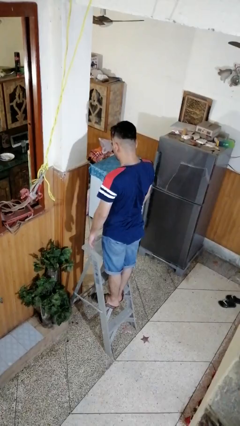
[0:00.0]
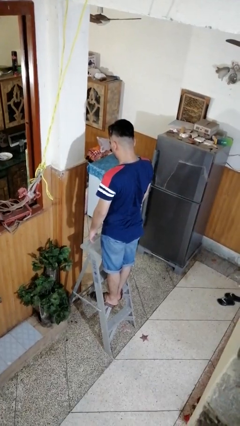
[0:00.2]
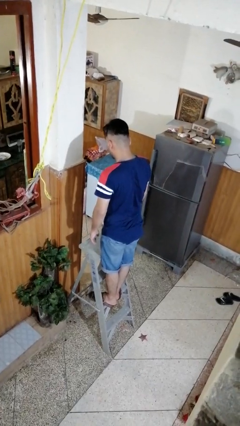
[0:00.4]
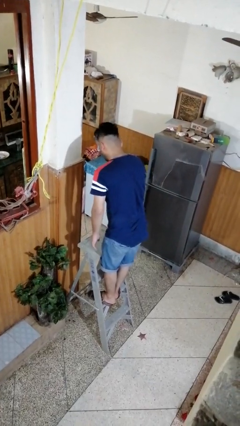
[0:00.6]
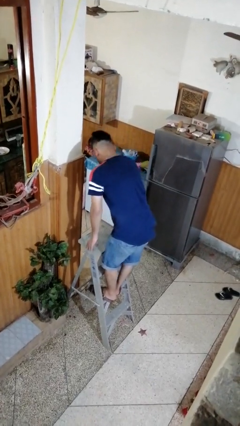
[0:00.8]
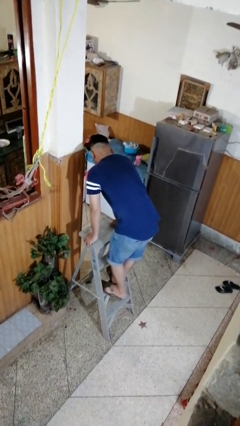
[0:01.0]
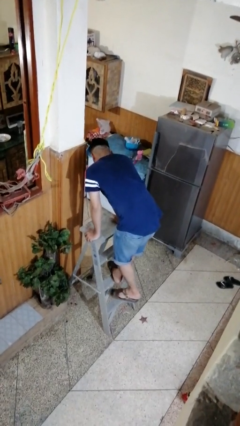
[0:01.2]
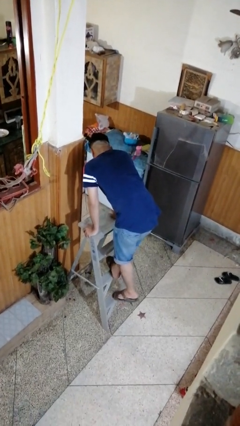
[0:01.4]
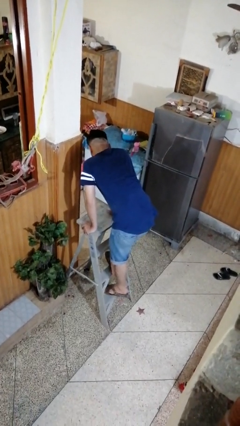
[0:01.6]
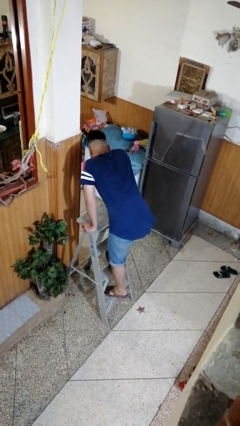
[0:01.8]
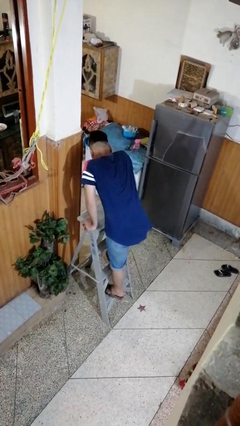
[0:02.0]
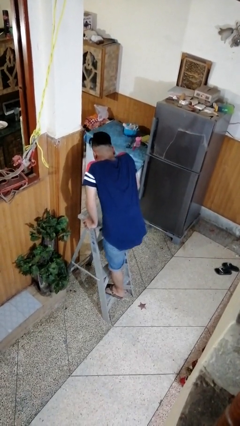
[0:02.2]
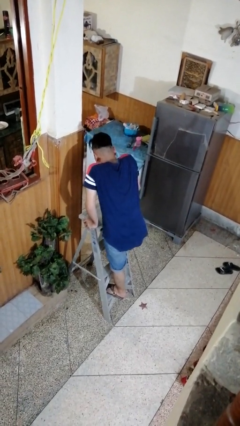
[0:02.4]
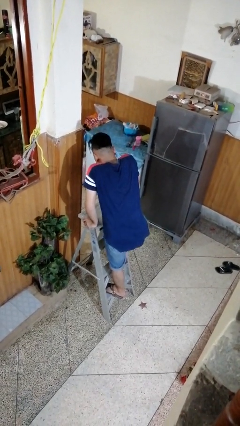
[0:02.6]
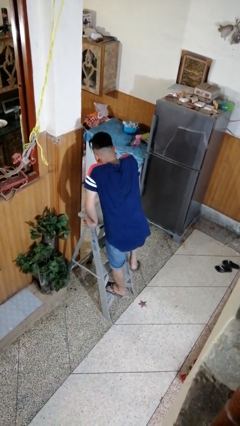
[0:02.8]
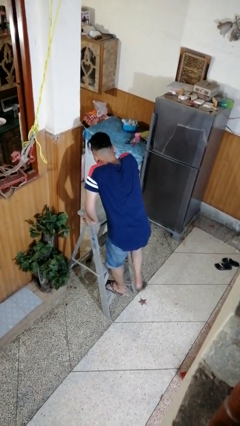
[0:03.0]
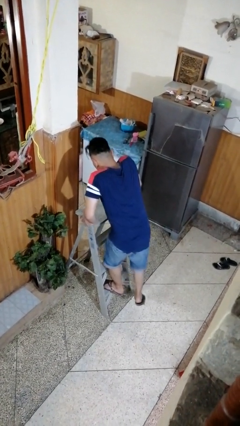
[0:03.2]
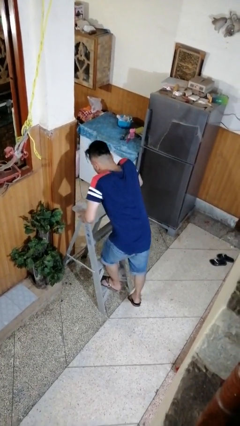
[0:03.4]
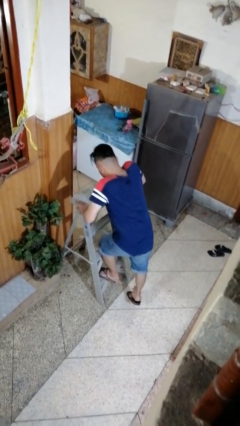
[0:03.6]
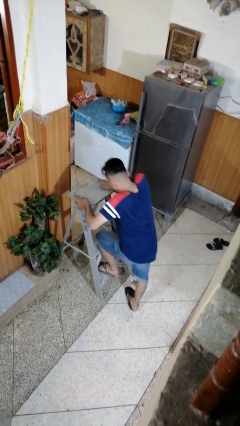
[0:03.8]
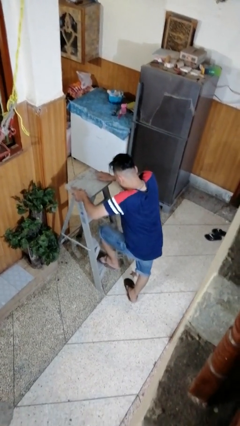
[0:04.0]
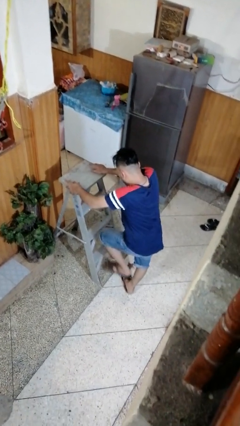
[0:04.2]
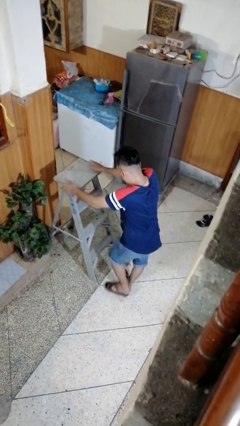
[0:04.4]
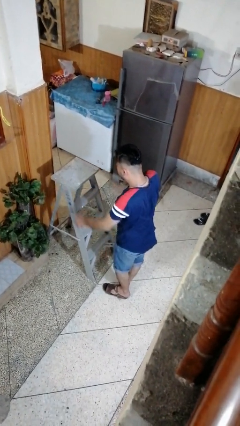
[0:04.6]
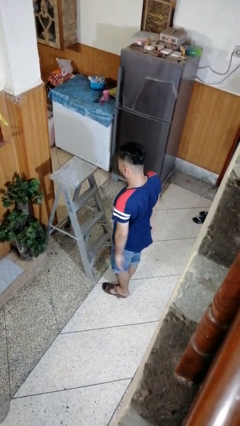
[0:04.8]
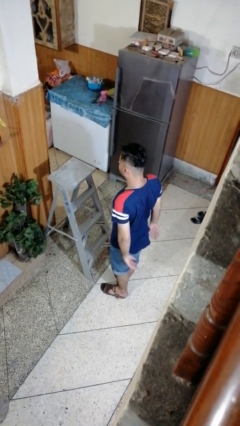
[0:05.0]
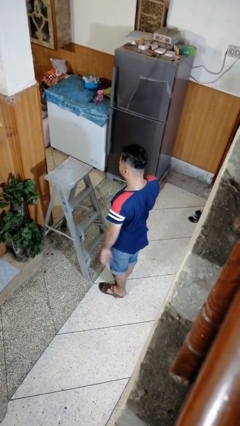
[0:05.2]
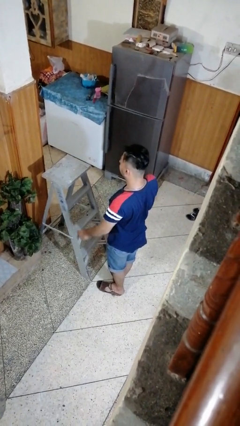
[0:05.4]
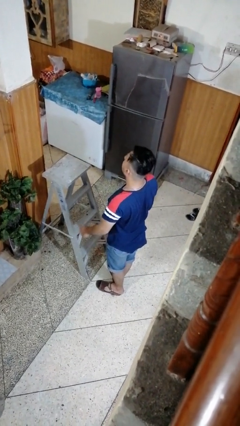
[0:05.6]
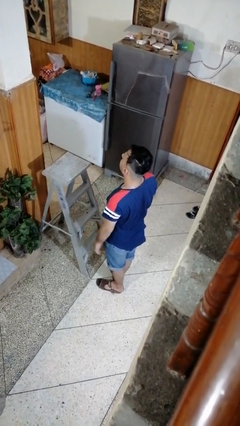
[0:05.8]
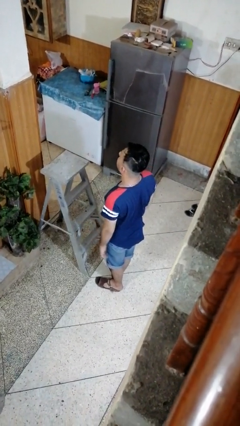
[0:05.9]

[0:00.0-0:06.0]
person climbs down ladder

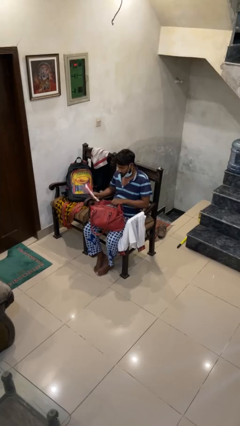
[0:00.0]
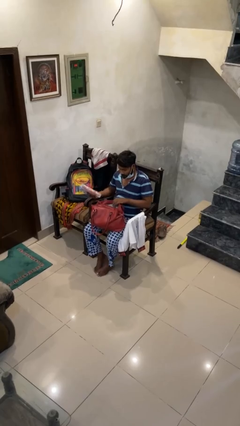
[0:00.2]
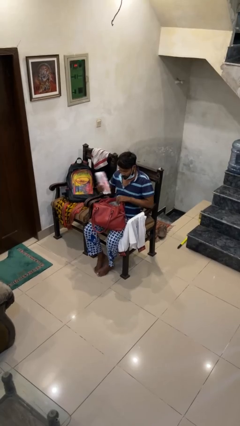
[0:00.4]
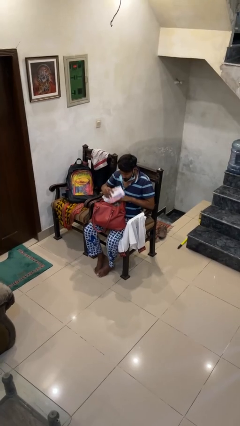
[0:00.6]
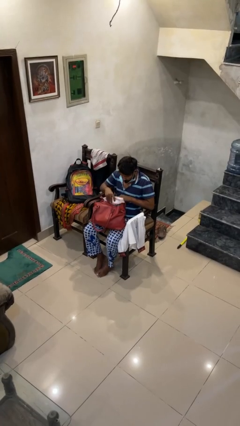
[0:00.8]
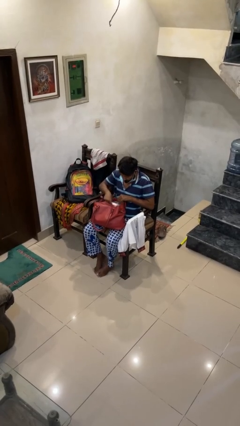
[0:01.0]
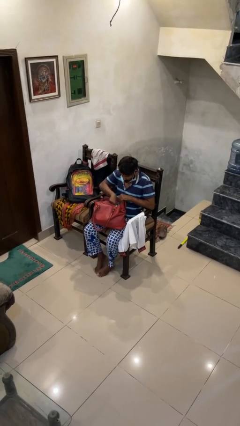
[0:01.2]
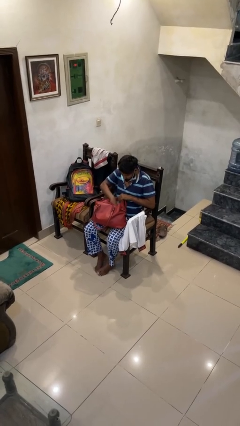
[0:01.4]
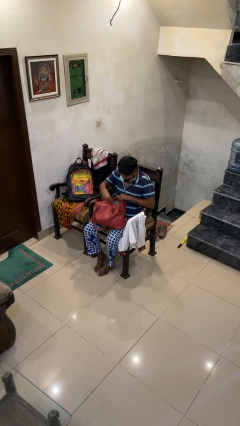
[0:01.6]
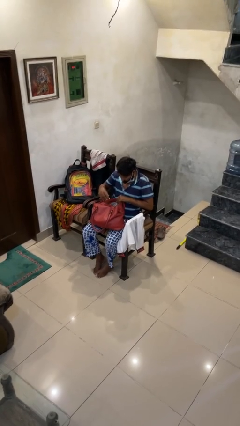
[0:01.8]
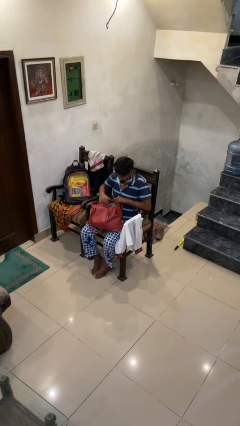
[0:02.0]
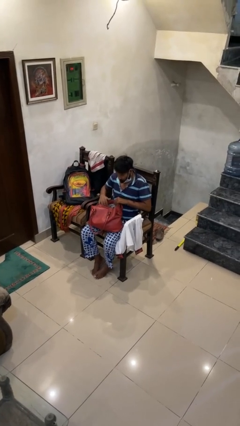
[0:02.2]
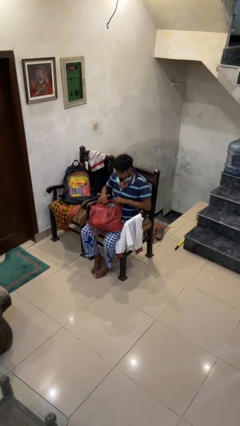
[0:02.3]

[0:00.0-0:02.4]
person puts object into purse

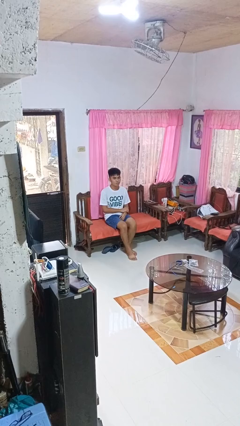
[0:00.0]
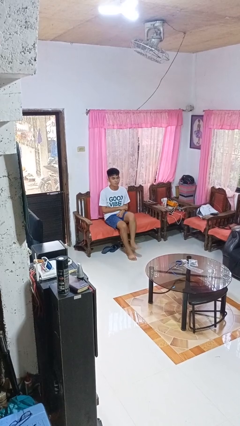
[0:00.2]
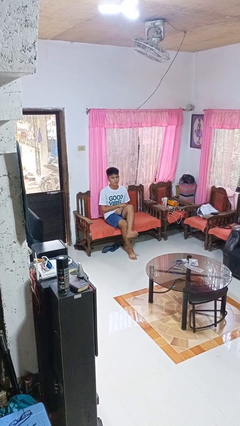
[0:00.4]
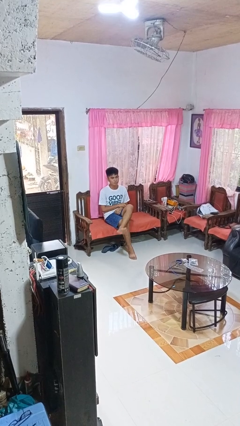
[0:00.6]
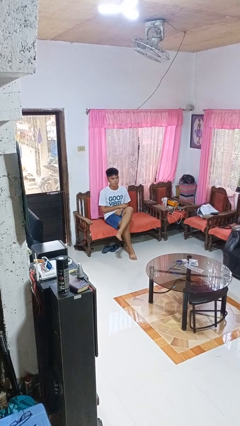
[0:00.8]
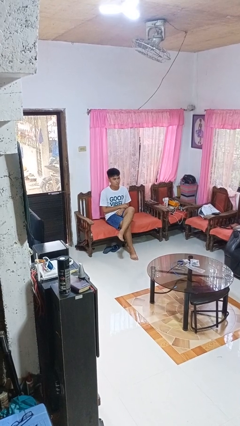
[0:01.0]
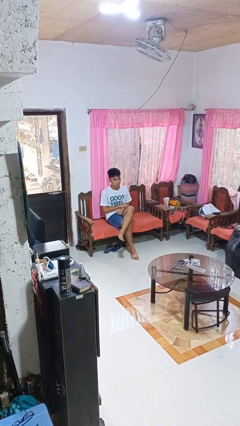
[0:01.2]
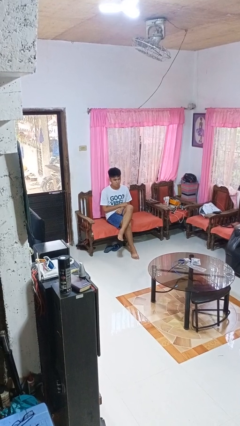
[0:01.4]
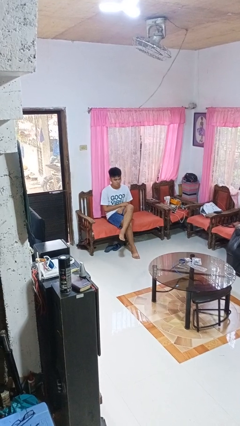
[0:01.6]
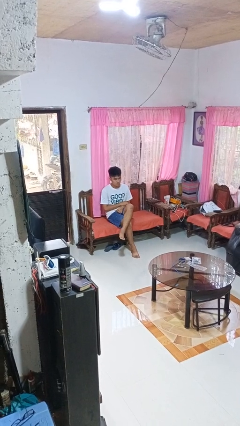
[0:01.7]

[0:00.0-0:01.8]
person crosses legs

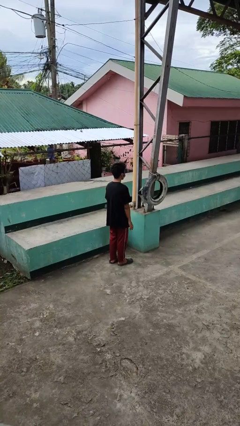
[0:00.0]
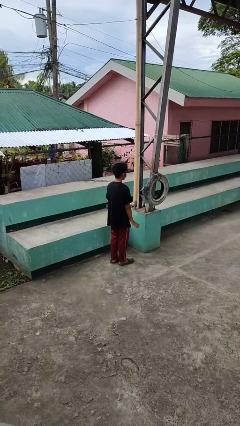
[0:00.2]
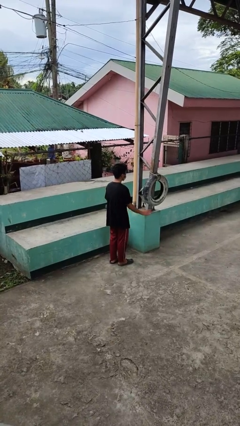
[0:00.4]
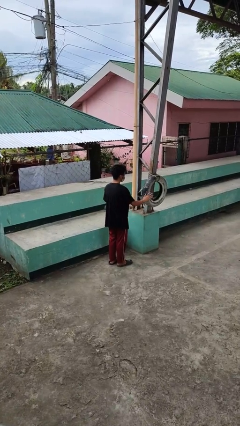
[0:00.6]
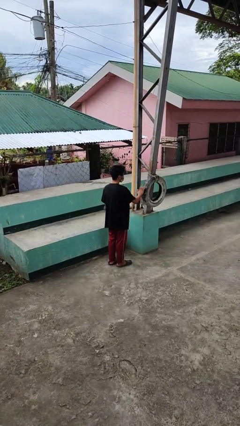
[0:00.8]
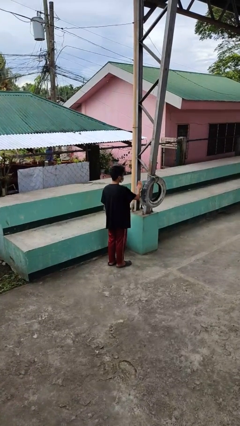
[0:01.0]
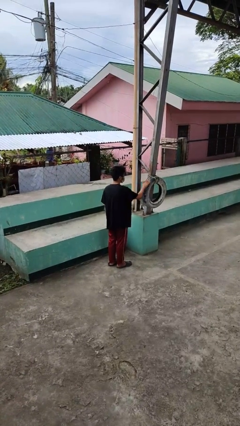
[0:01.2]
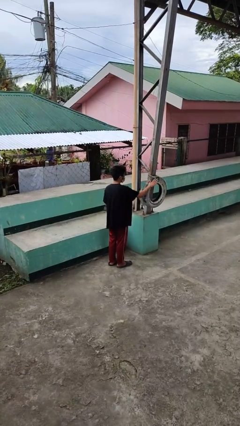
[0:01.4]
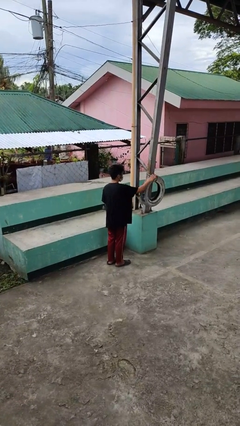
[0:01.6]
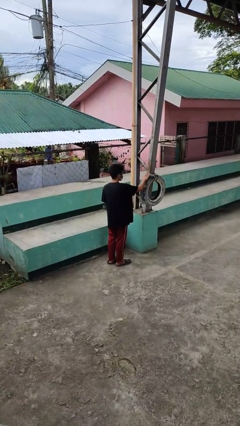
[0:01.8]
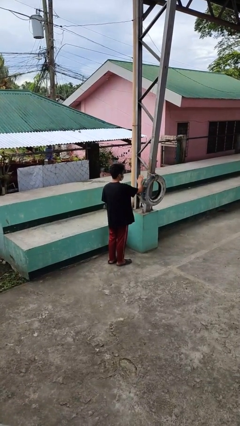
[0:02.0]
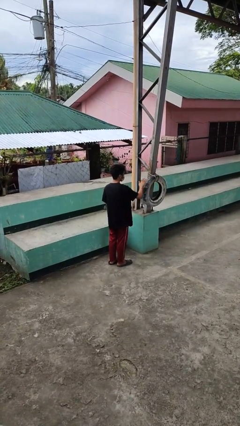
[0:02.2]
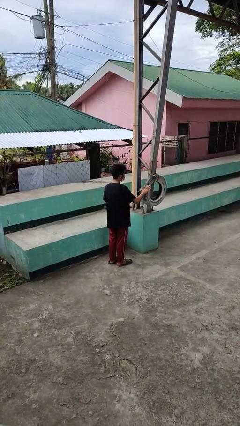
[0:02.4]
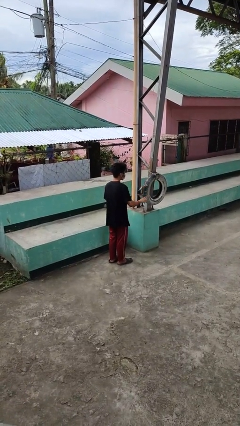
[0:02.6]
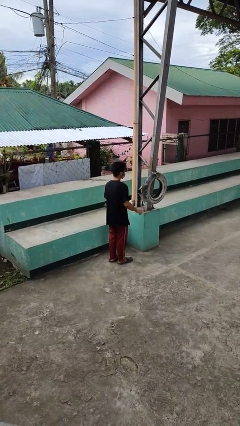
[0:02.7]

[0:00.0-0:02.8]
person waves hand over object

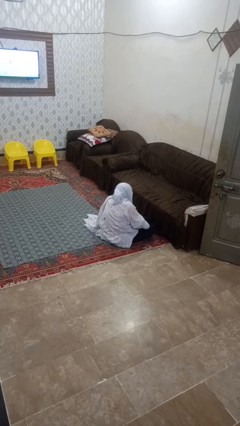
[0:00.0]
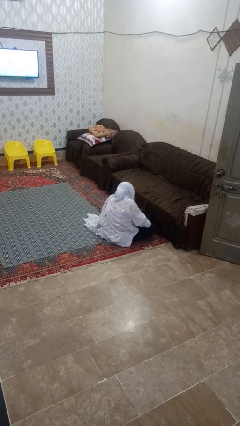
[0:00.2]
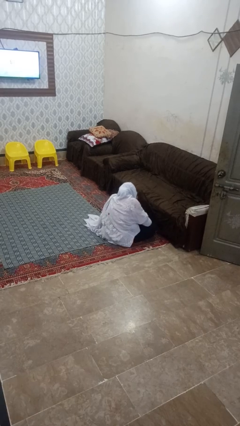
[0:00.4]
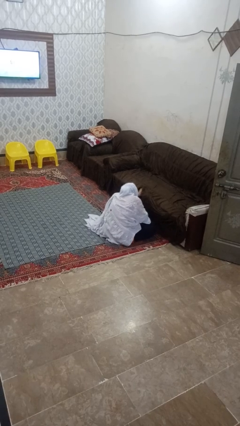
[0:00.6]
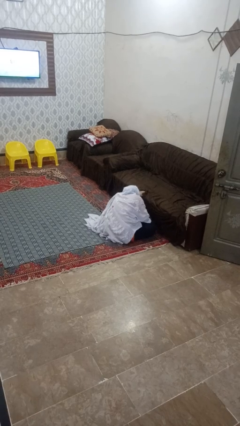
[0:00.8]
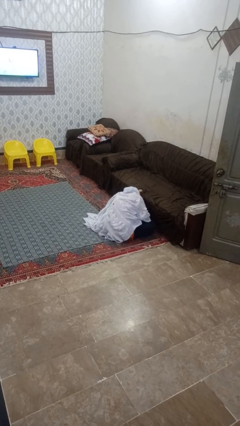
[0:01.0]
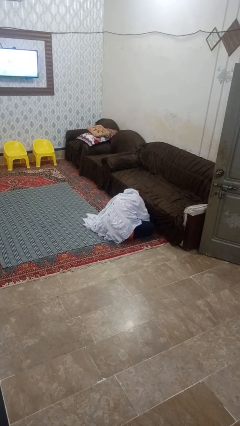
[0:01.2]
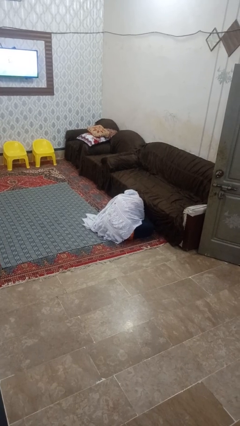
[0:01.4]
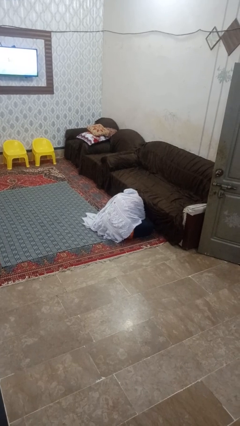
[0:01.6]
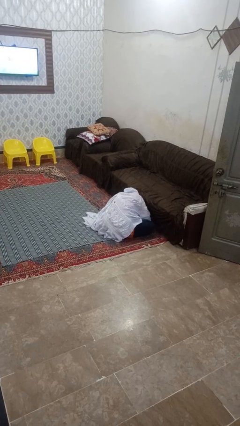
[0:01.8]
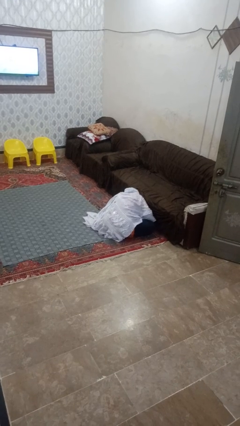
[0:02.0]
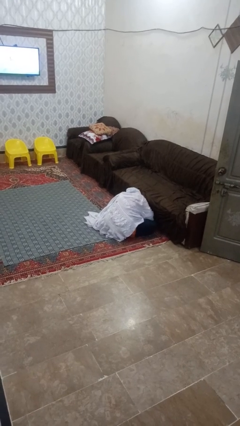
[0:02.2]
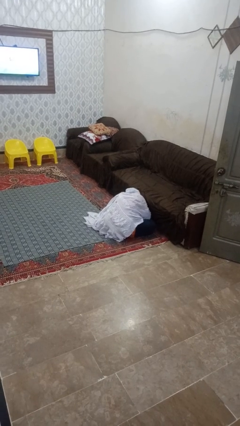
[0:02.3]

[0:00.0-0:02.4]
person searches under couch

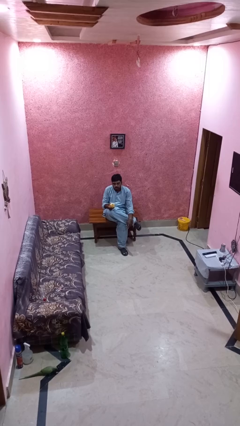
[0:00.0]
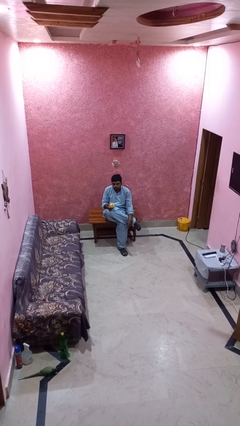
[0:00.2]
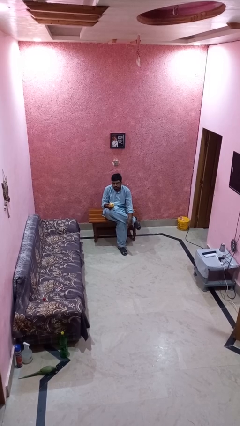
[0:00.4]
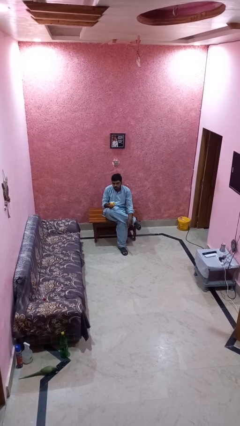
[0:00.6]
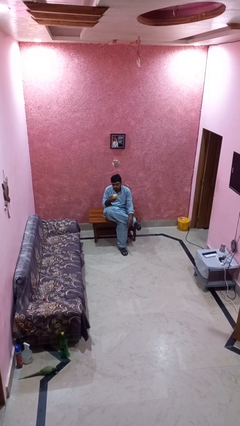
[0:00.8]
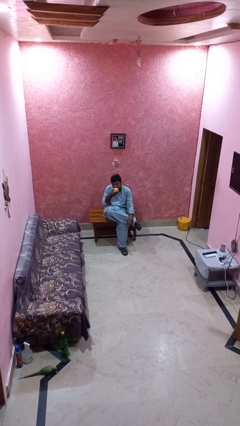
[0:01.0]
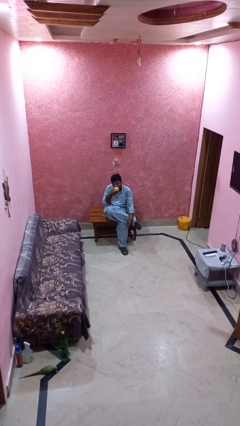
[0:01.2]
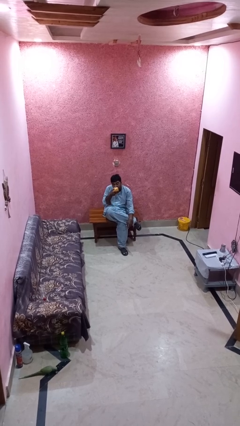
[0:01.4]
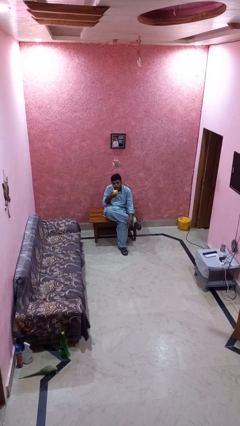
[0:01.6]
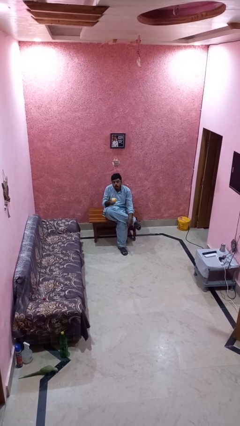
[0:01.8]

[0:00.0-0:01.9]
person eats apple
